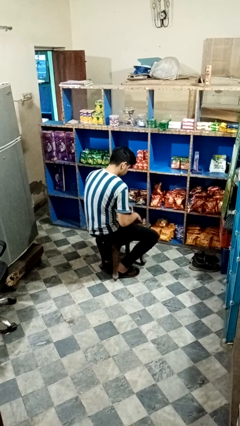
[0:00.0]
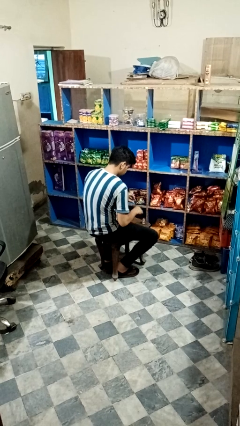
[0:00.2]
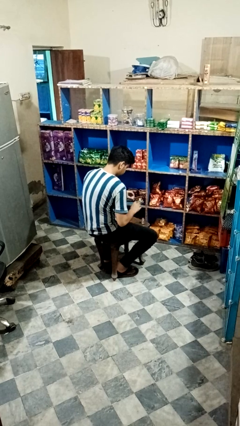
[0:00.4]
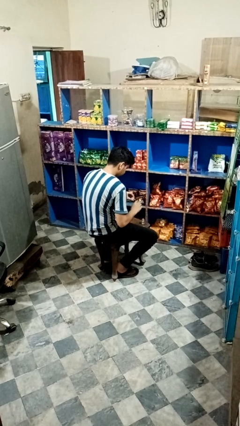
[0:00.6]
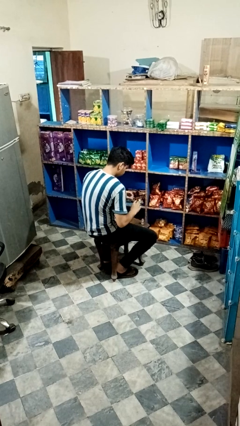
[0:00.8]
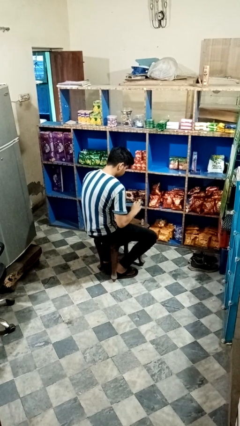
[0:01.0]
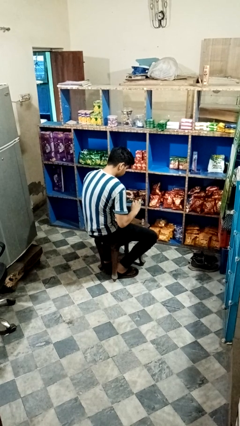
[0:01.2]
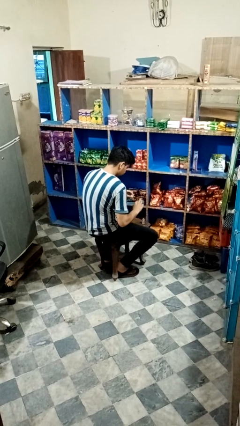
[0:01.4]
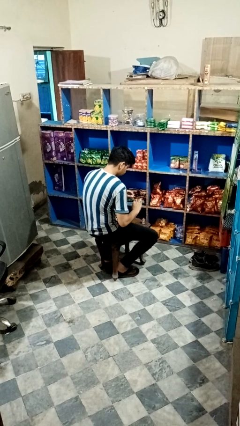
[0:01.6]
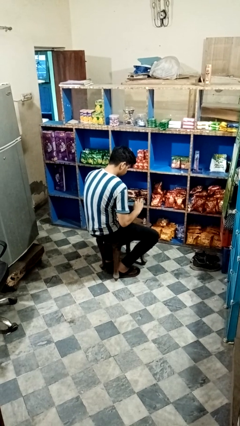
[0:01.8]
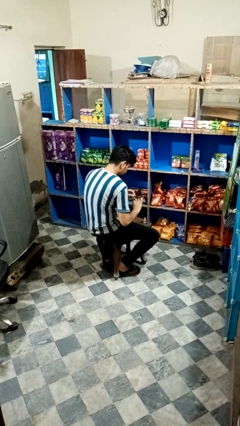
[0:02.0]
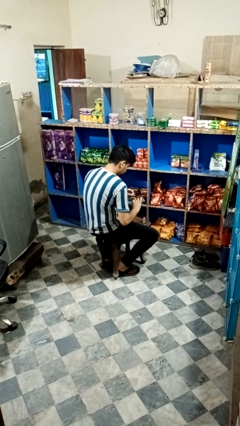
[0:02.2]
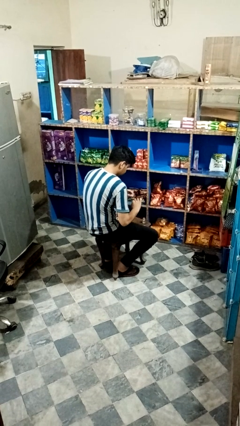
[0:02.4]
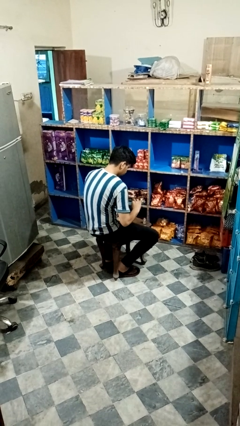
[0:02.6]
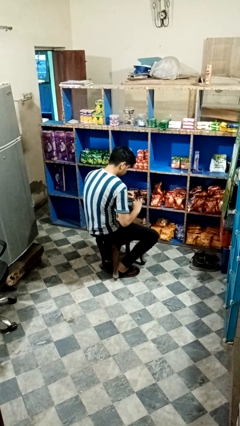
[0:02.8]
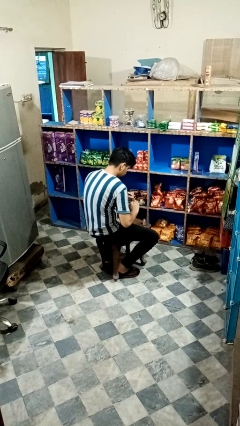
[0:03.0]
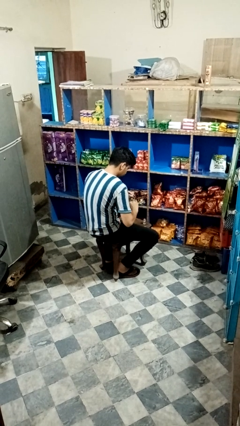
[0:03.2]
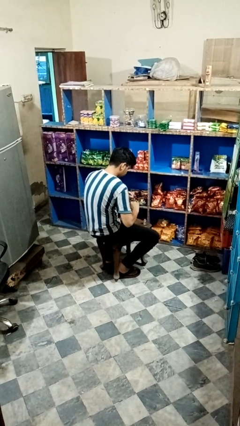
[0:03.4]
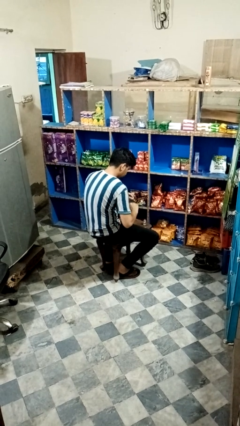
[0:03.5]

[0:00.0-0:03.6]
person paints fingernails

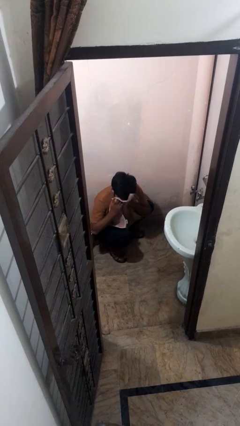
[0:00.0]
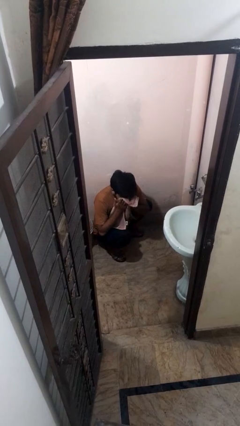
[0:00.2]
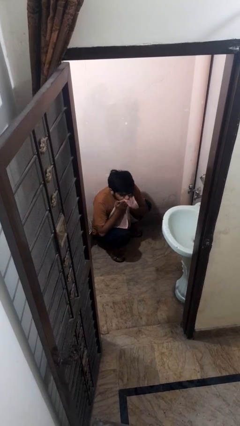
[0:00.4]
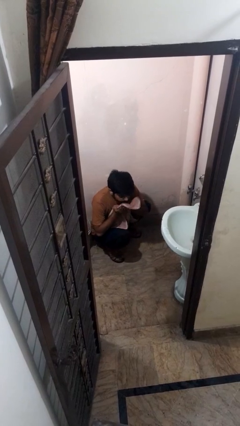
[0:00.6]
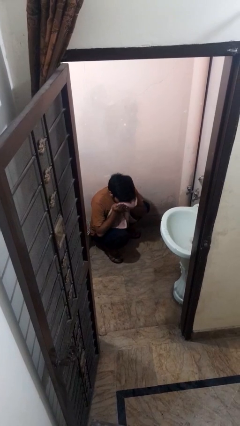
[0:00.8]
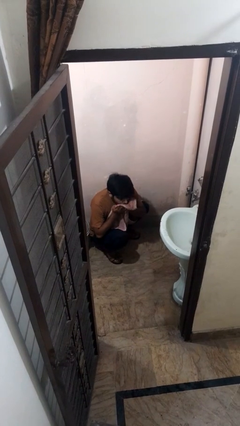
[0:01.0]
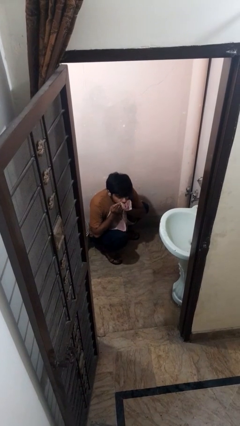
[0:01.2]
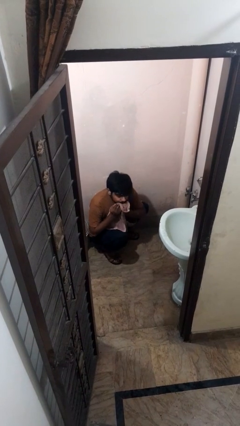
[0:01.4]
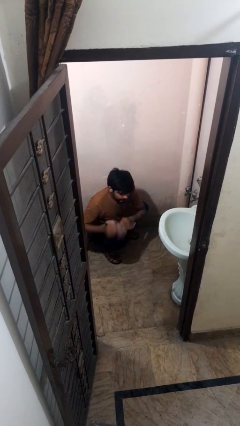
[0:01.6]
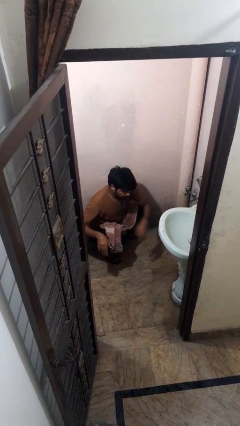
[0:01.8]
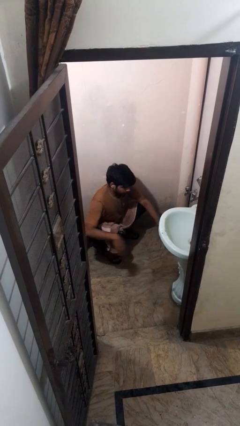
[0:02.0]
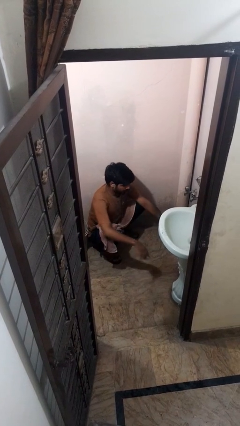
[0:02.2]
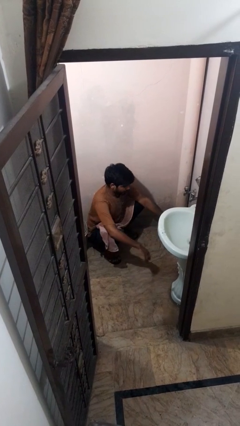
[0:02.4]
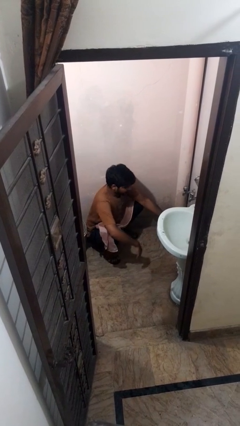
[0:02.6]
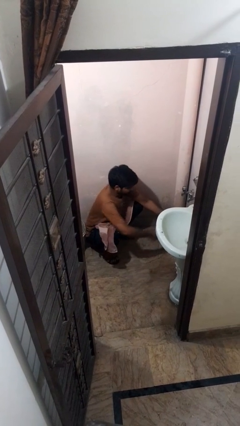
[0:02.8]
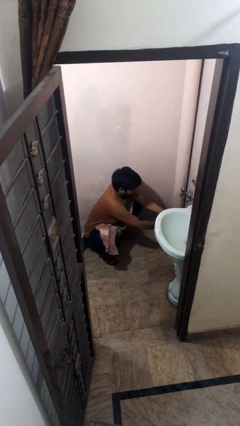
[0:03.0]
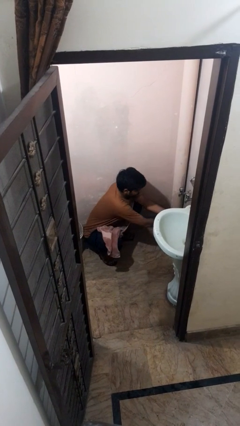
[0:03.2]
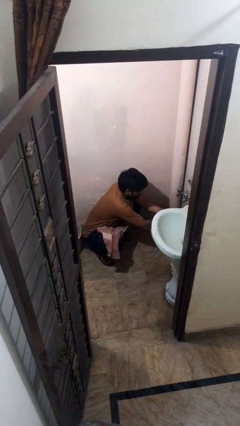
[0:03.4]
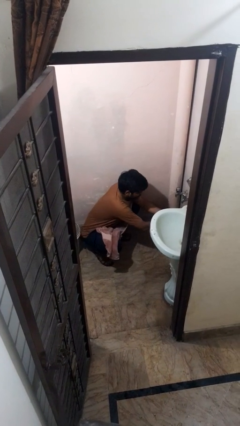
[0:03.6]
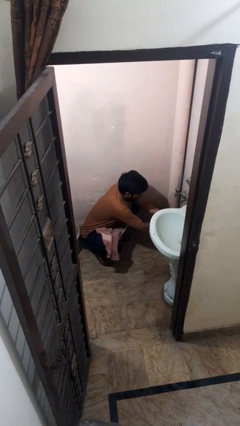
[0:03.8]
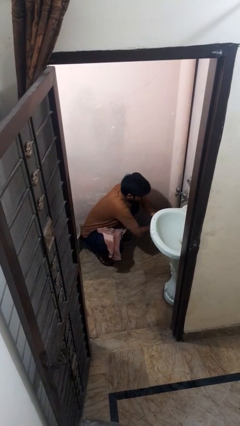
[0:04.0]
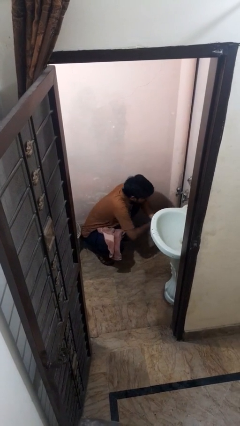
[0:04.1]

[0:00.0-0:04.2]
person picks up object from bed

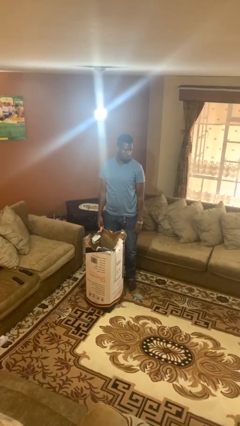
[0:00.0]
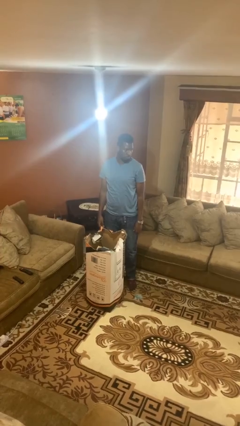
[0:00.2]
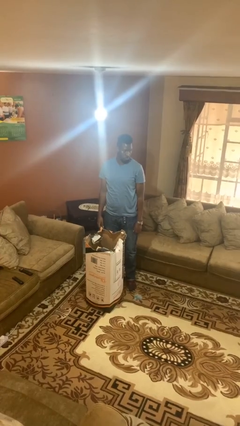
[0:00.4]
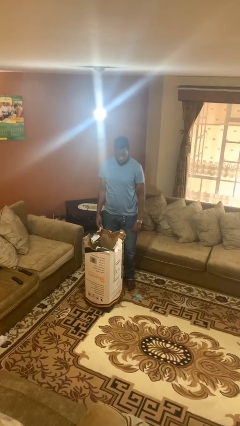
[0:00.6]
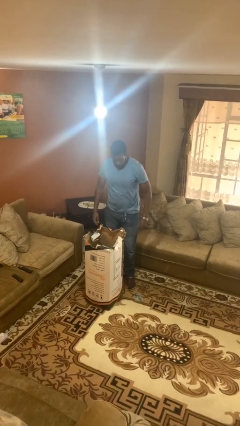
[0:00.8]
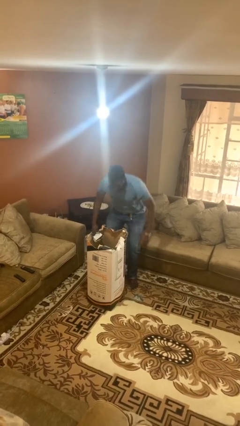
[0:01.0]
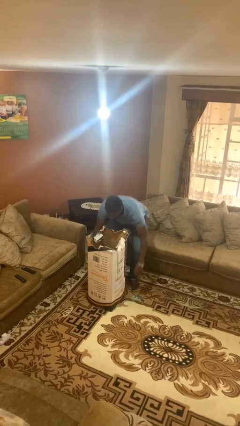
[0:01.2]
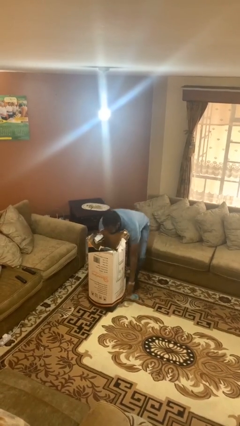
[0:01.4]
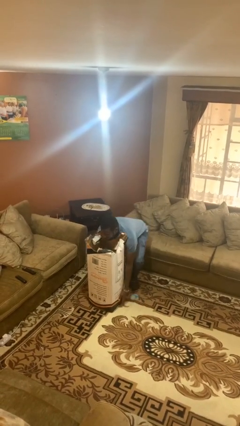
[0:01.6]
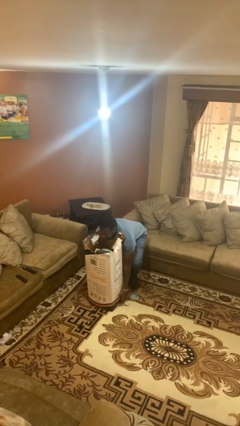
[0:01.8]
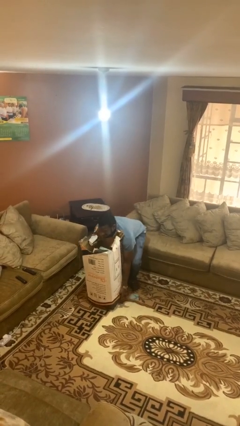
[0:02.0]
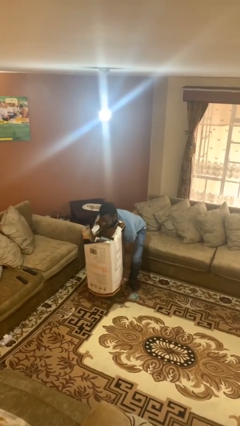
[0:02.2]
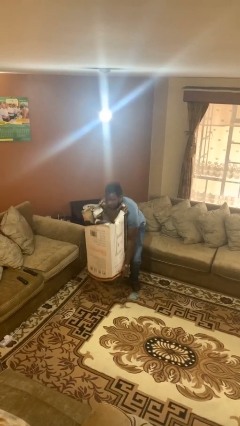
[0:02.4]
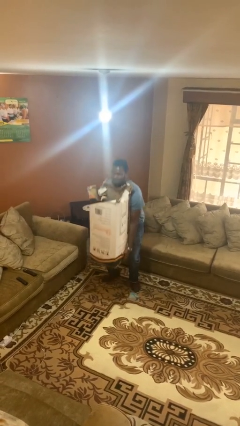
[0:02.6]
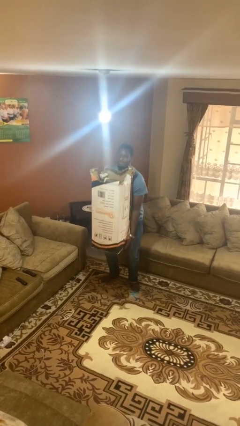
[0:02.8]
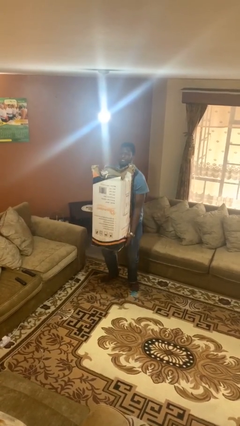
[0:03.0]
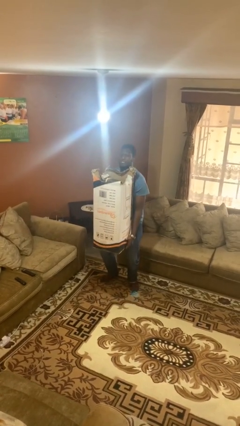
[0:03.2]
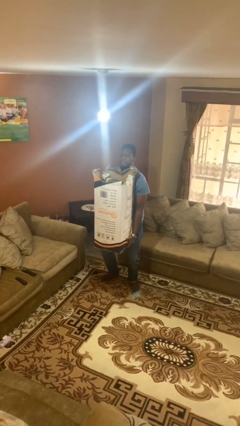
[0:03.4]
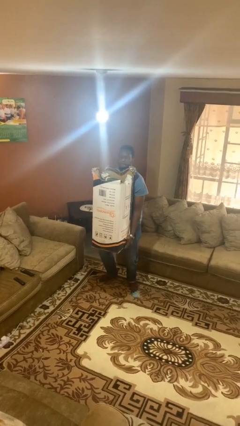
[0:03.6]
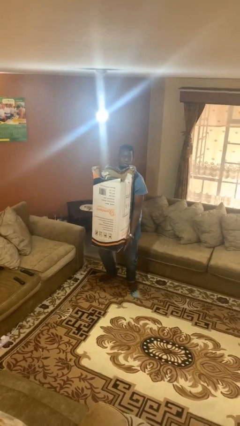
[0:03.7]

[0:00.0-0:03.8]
person picks up object from floor

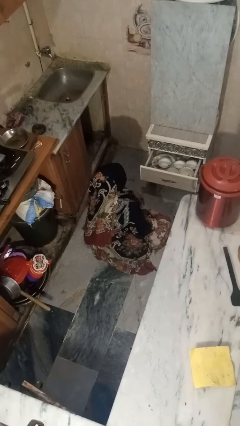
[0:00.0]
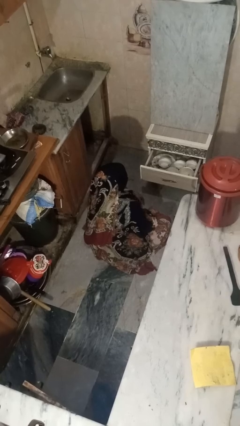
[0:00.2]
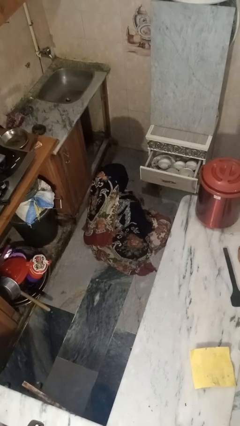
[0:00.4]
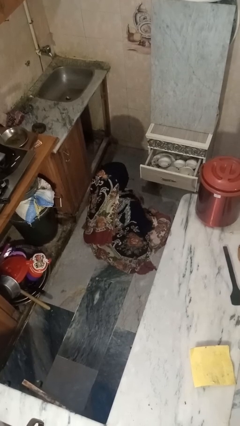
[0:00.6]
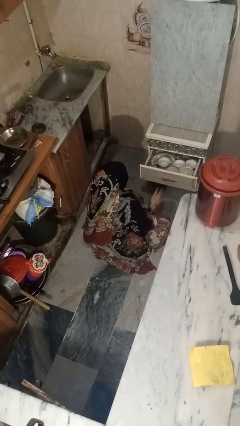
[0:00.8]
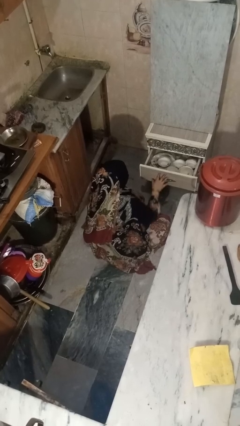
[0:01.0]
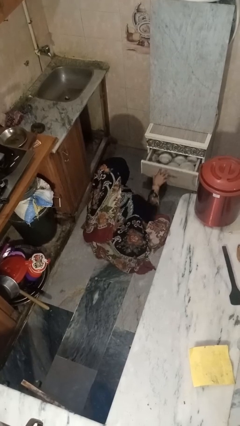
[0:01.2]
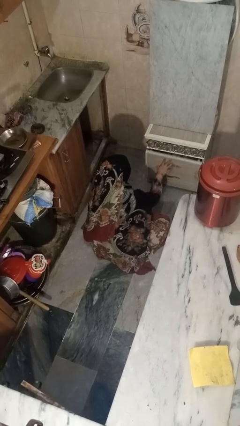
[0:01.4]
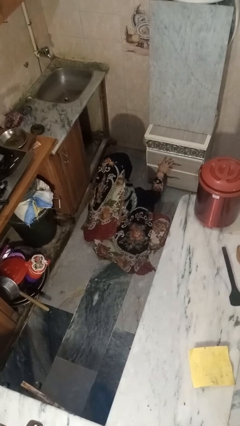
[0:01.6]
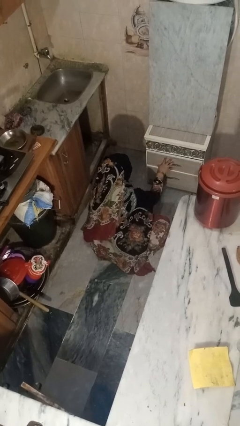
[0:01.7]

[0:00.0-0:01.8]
person closes kitchen drawer

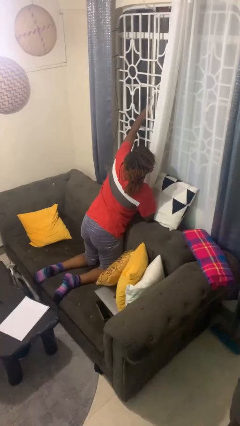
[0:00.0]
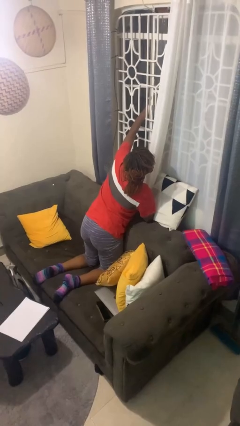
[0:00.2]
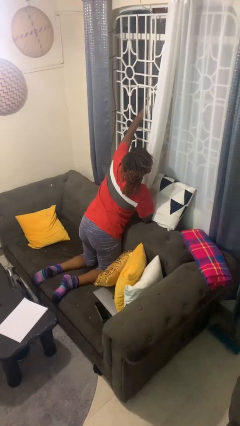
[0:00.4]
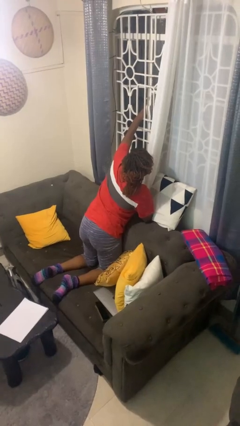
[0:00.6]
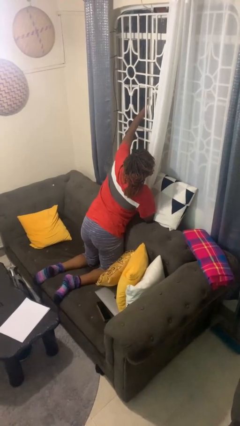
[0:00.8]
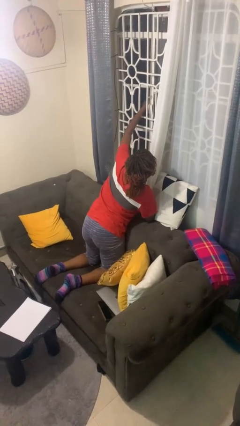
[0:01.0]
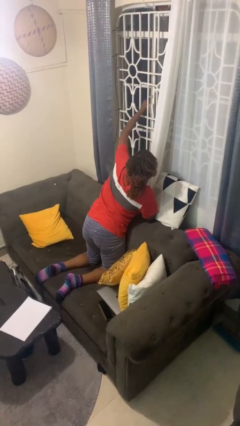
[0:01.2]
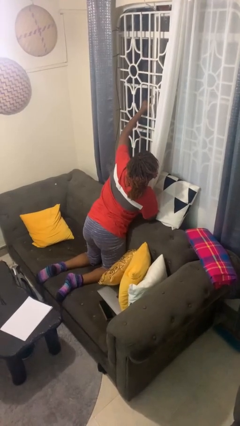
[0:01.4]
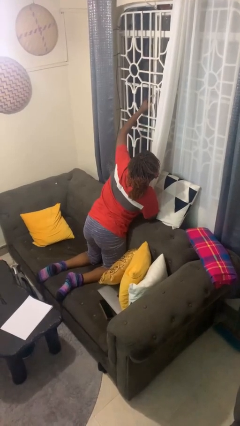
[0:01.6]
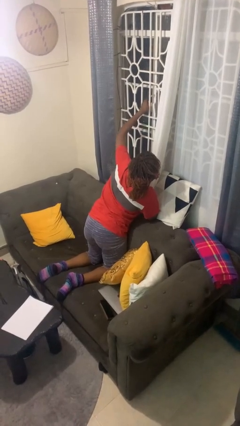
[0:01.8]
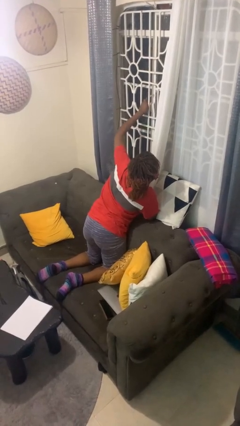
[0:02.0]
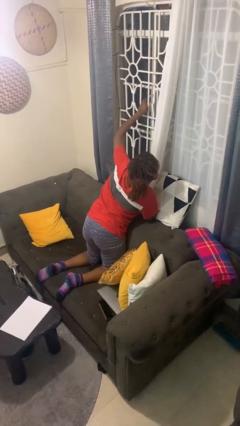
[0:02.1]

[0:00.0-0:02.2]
person closes home window

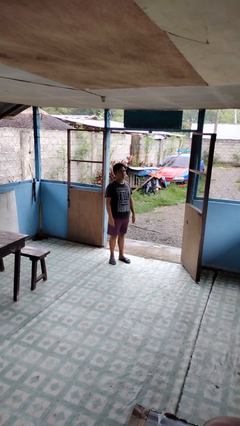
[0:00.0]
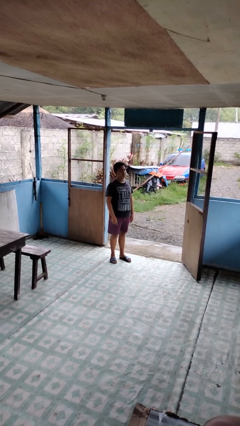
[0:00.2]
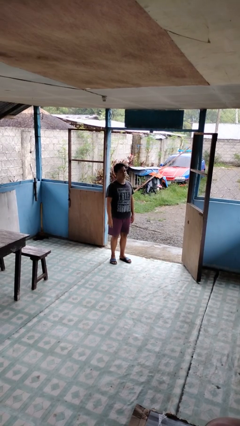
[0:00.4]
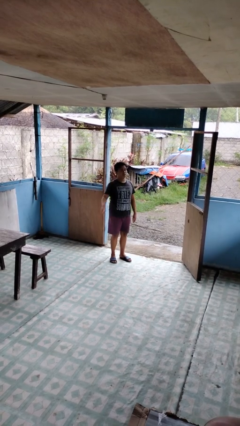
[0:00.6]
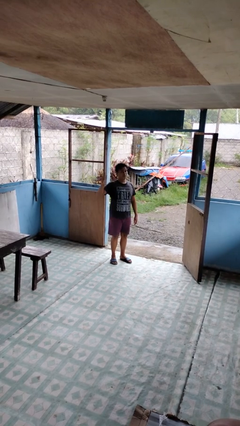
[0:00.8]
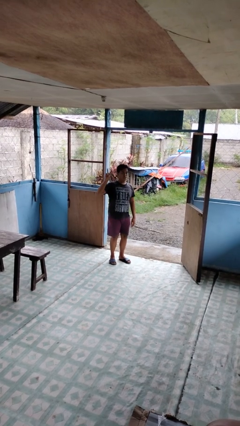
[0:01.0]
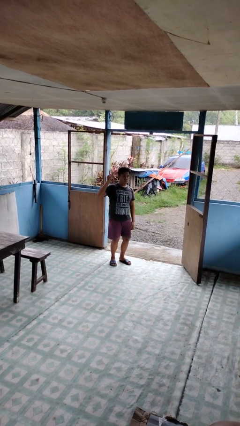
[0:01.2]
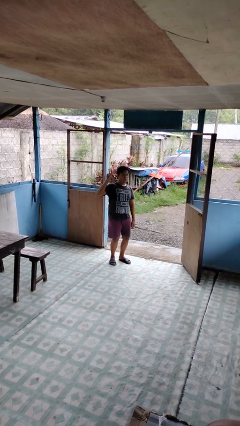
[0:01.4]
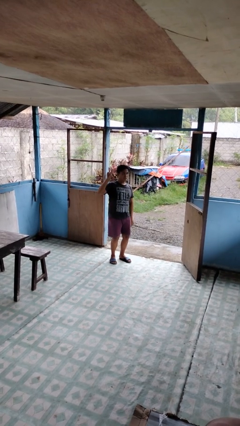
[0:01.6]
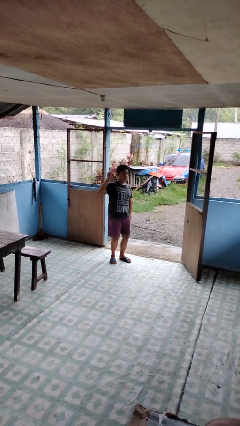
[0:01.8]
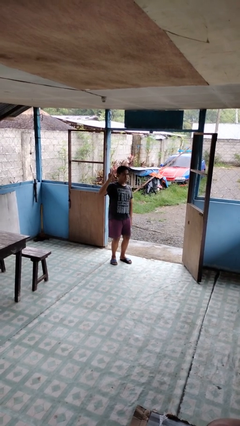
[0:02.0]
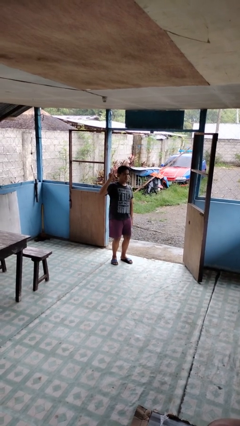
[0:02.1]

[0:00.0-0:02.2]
person gestures peace
